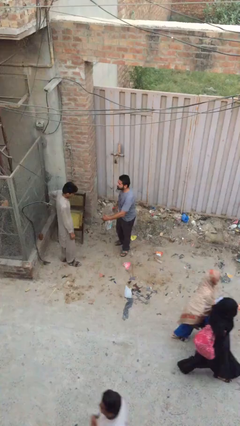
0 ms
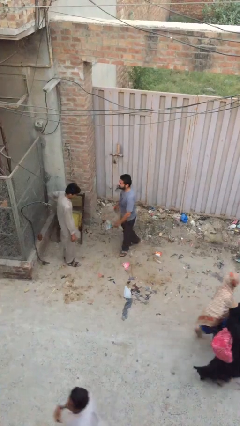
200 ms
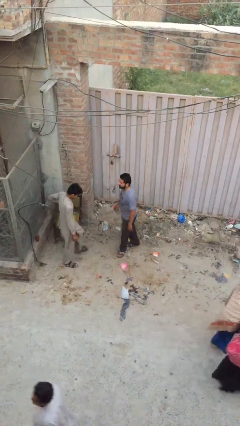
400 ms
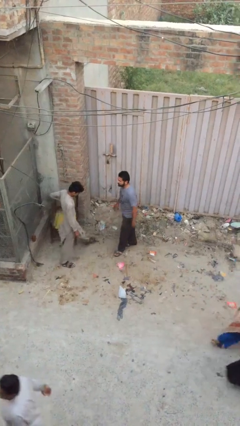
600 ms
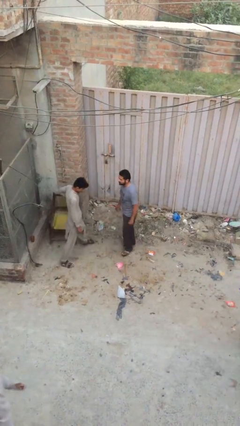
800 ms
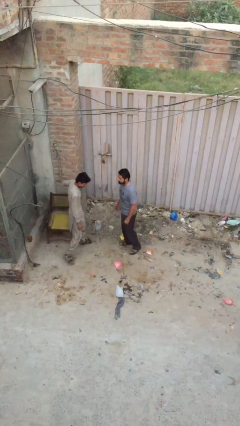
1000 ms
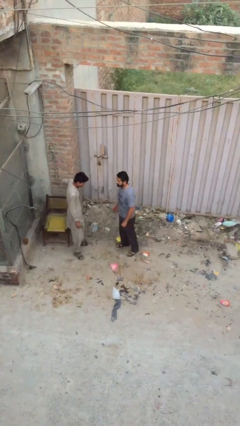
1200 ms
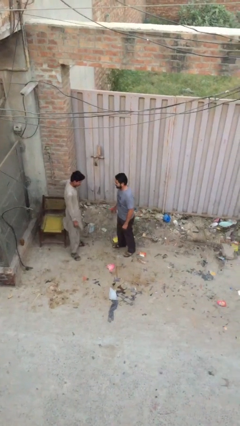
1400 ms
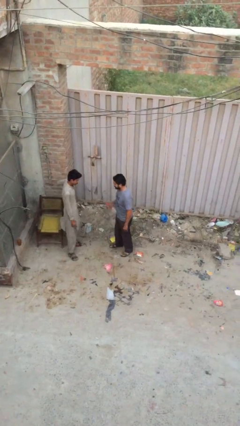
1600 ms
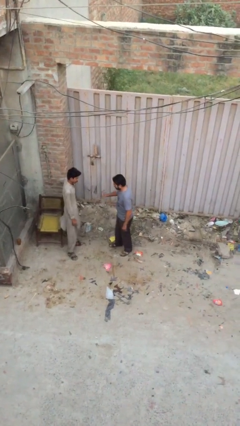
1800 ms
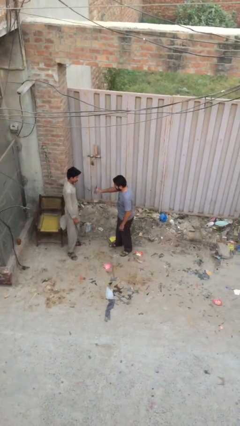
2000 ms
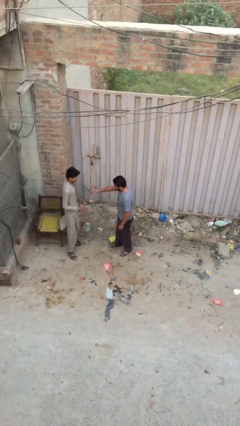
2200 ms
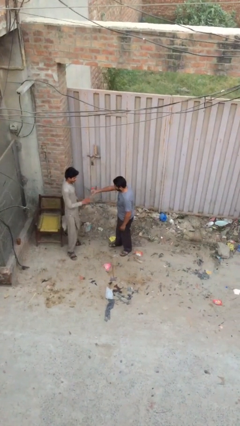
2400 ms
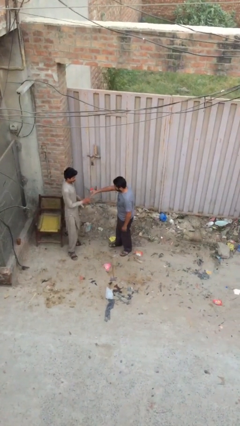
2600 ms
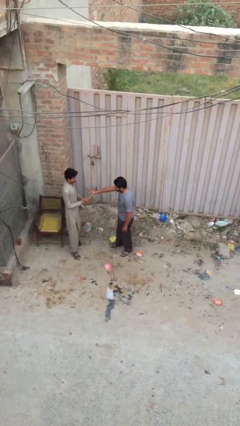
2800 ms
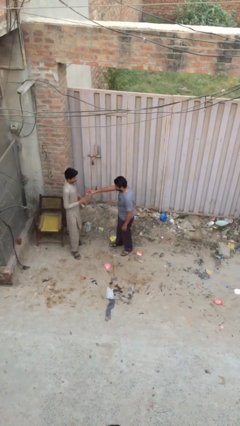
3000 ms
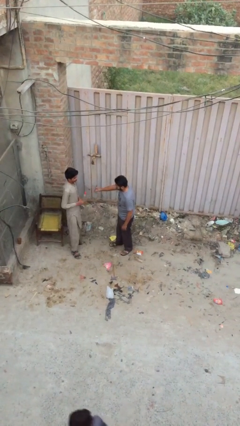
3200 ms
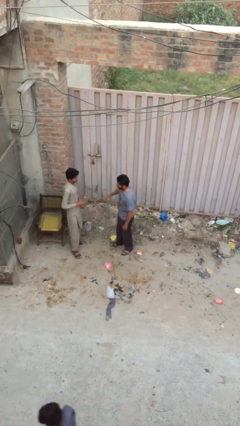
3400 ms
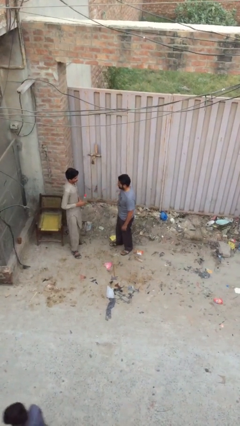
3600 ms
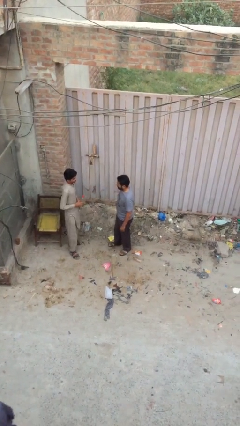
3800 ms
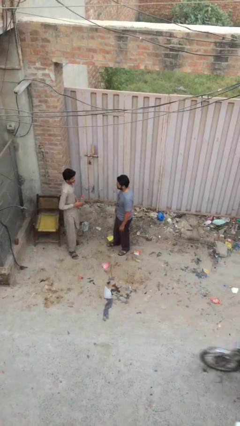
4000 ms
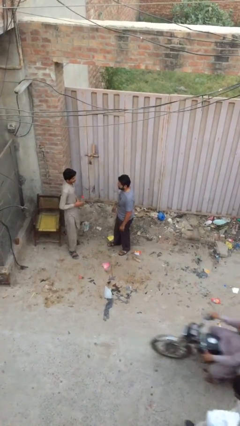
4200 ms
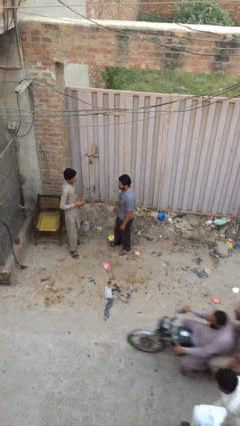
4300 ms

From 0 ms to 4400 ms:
person transfers object to person

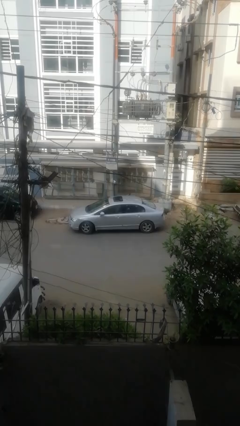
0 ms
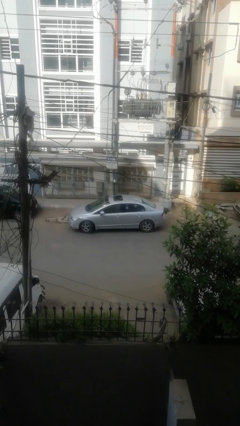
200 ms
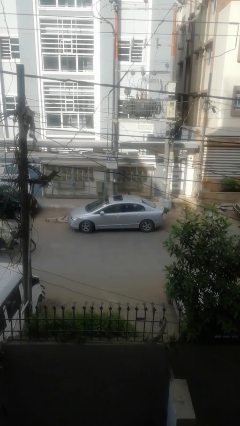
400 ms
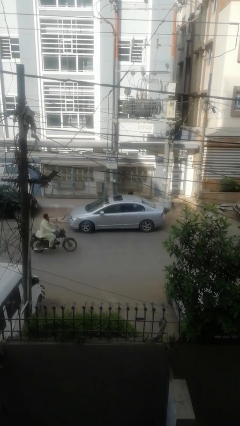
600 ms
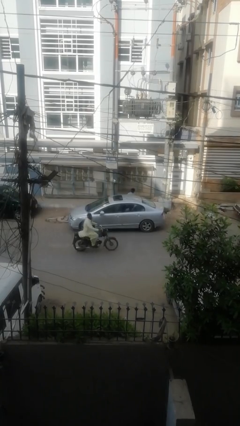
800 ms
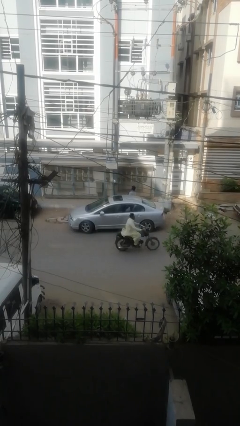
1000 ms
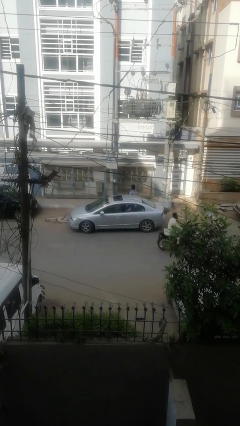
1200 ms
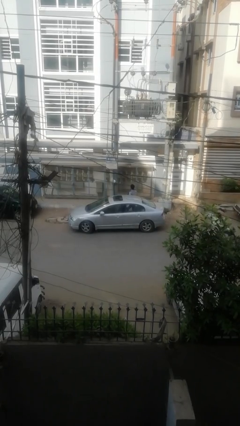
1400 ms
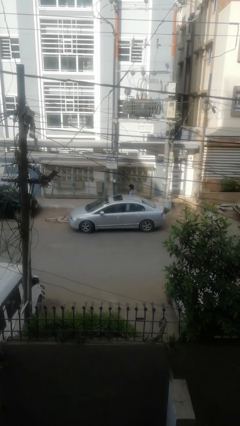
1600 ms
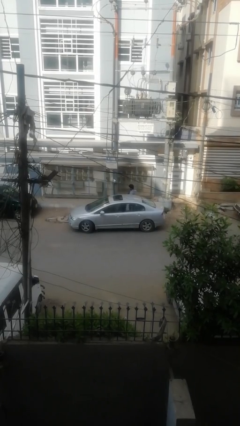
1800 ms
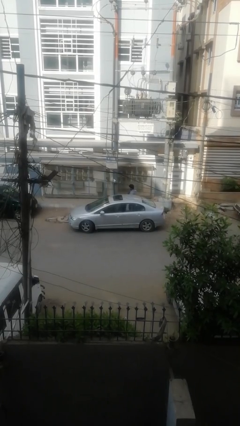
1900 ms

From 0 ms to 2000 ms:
car drops off person

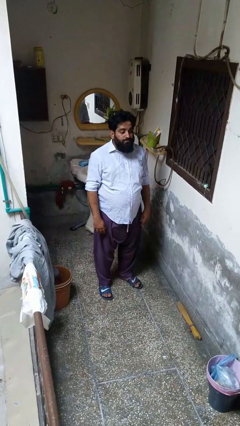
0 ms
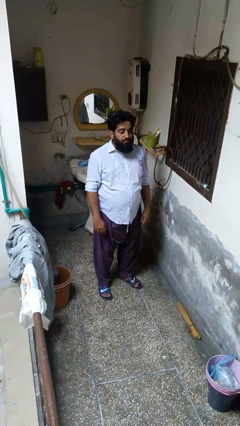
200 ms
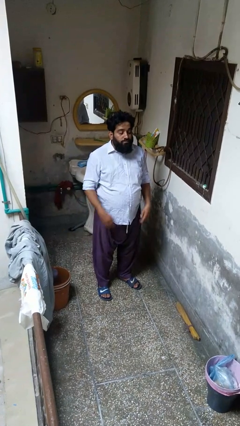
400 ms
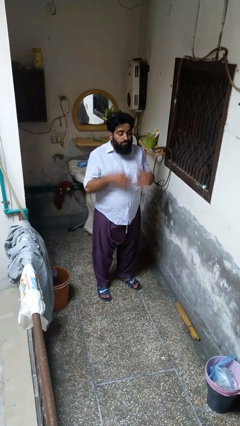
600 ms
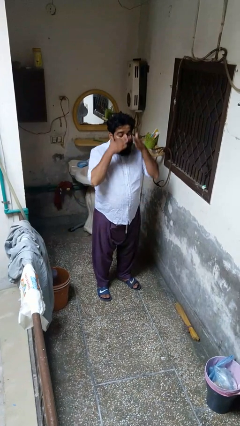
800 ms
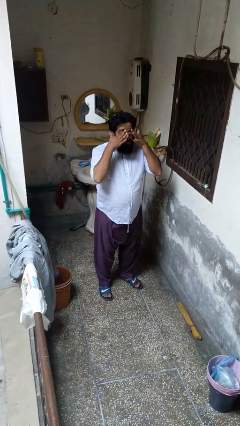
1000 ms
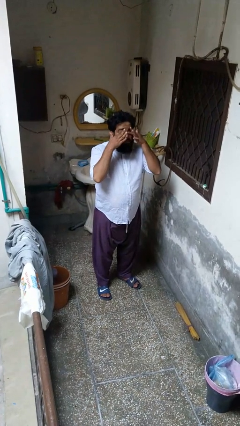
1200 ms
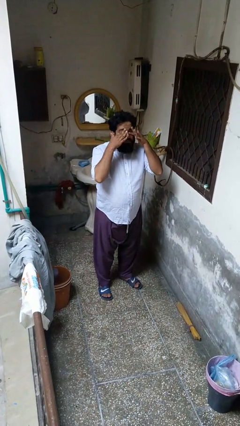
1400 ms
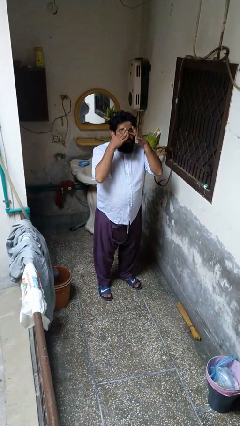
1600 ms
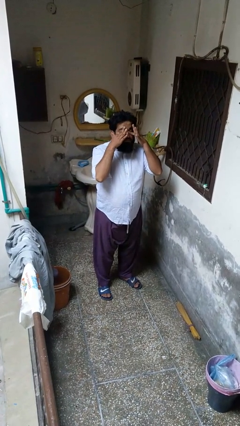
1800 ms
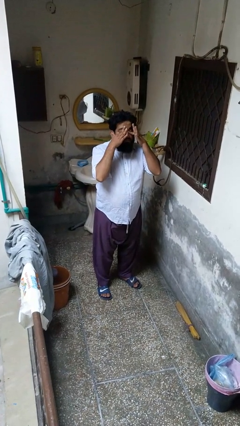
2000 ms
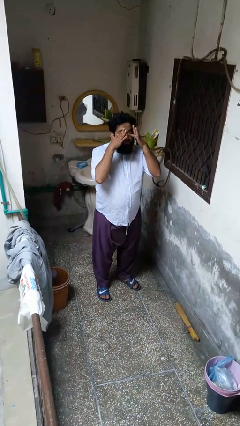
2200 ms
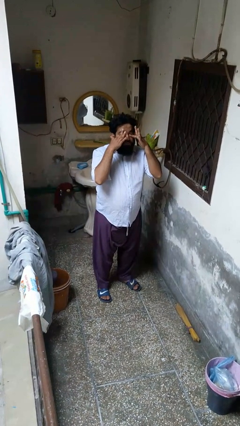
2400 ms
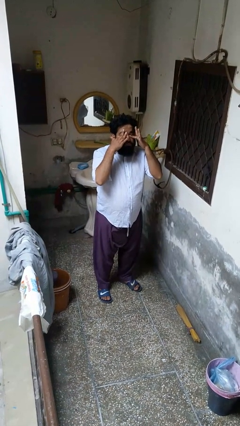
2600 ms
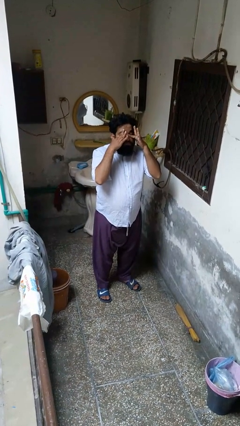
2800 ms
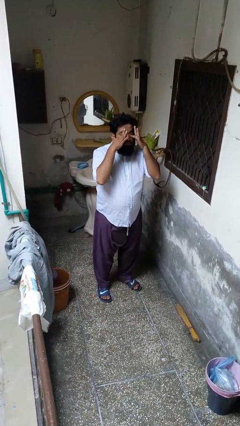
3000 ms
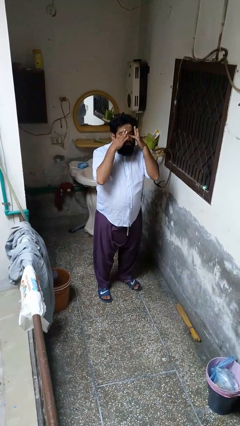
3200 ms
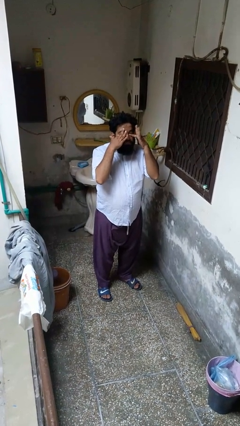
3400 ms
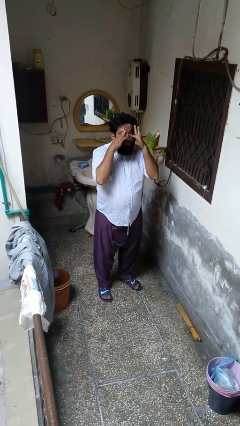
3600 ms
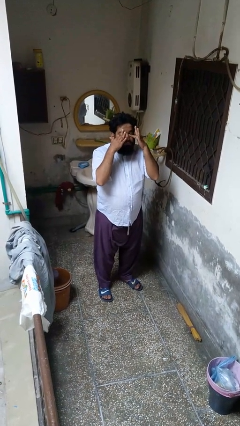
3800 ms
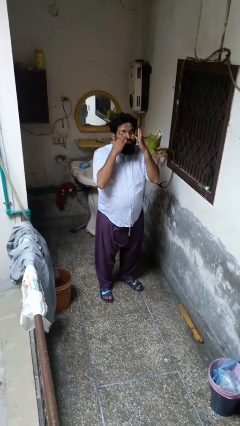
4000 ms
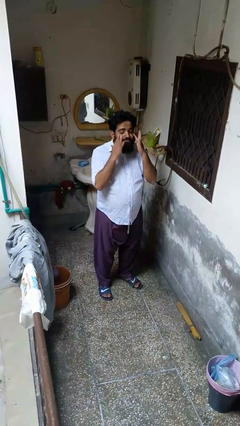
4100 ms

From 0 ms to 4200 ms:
person rubs eyes

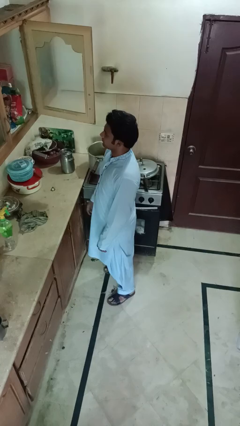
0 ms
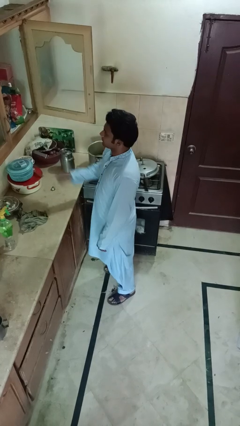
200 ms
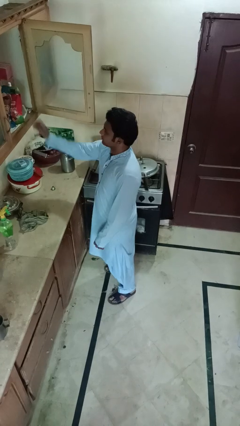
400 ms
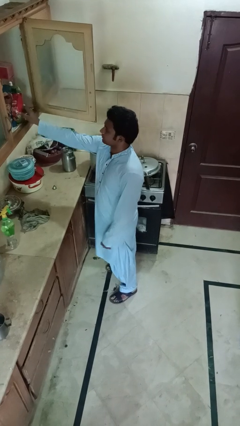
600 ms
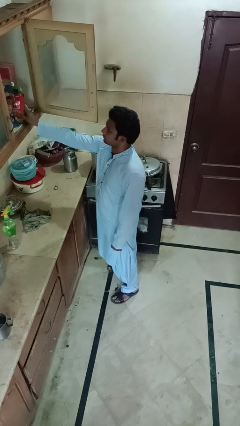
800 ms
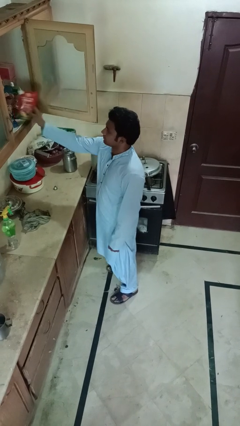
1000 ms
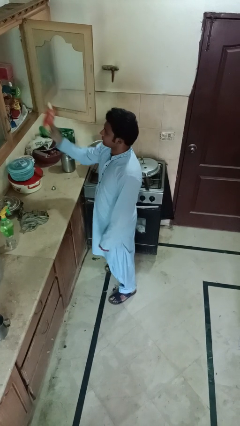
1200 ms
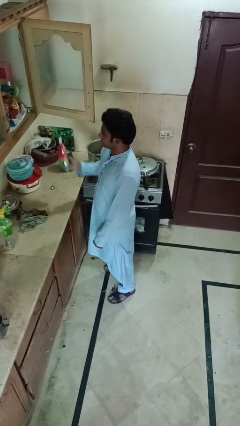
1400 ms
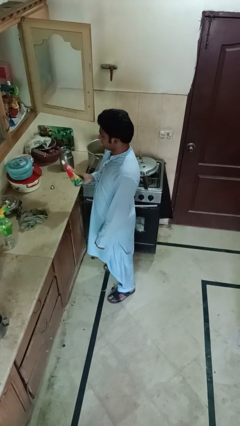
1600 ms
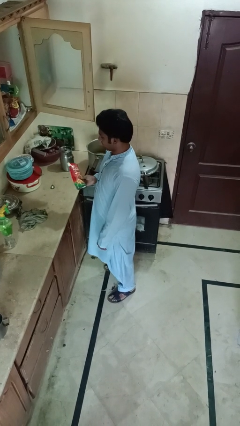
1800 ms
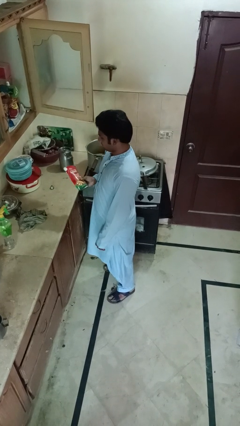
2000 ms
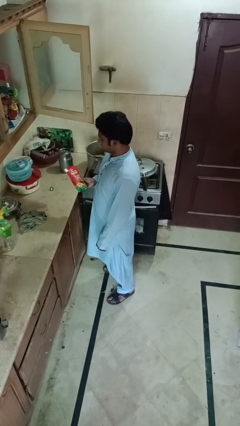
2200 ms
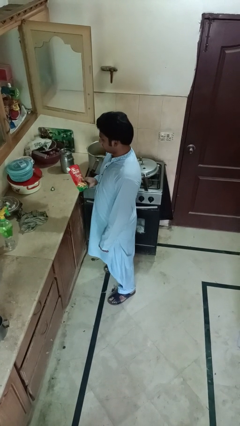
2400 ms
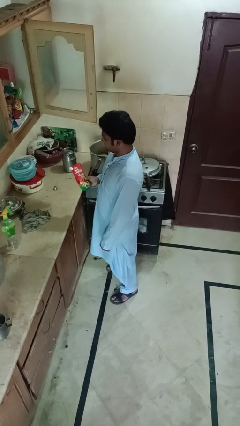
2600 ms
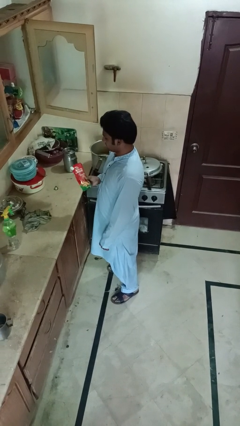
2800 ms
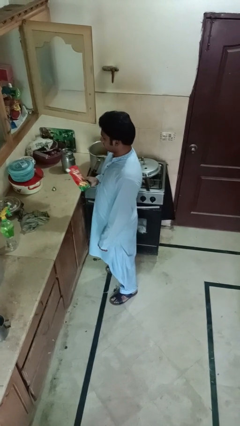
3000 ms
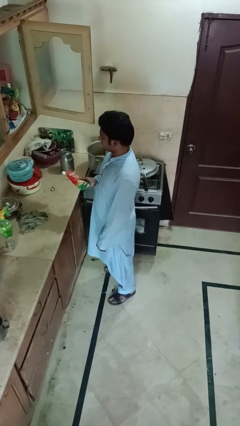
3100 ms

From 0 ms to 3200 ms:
person picks up object from cabinet

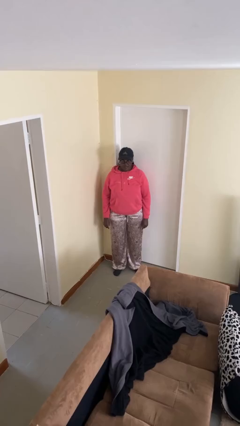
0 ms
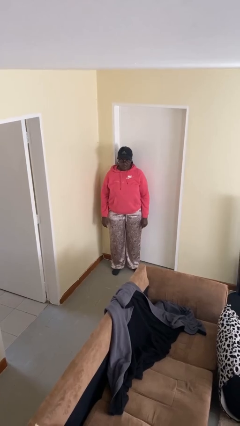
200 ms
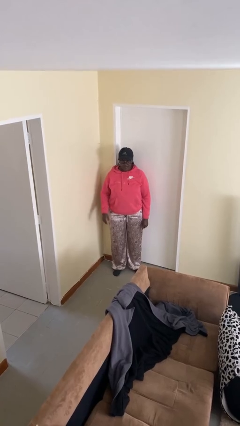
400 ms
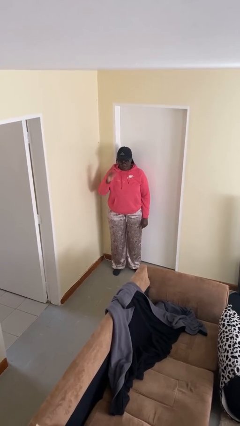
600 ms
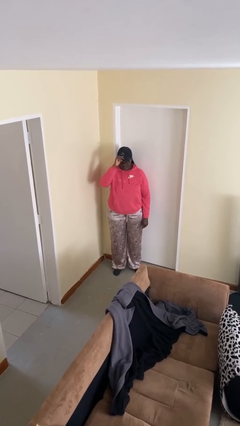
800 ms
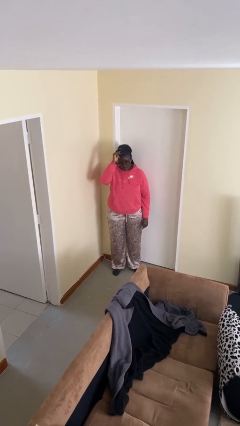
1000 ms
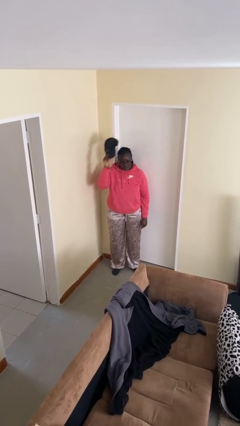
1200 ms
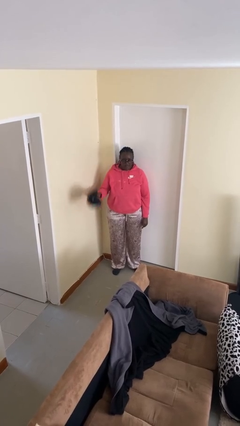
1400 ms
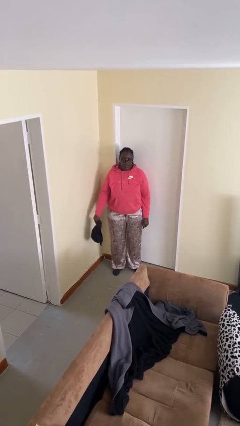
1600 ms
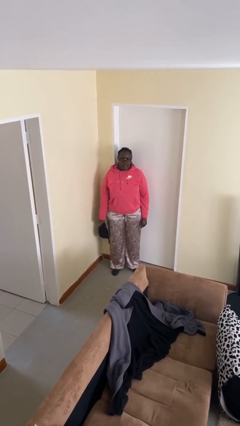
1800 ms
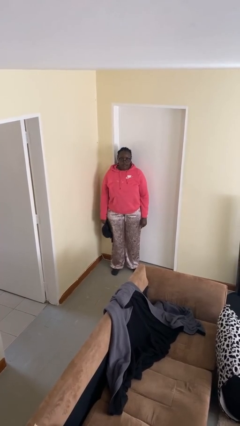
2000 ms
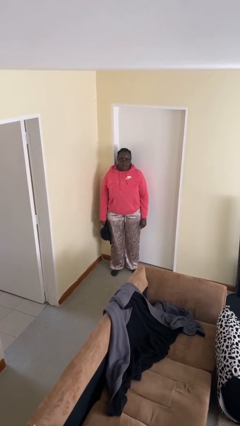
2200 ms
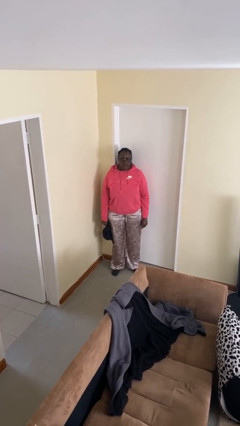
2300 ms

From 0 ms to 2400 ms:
person takes off hat

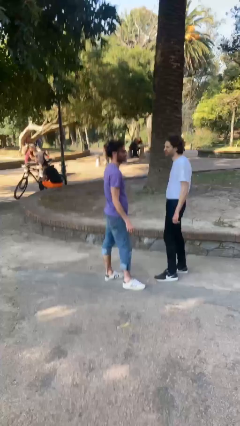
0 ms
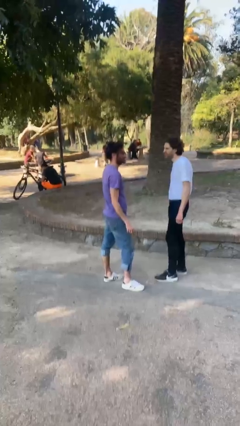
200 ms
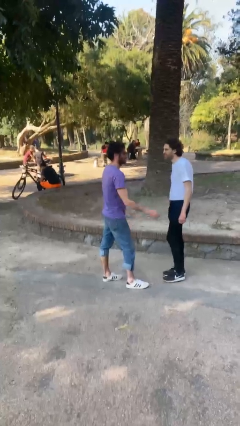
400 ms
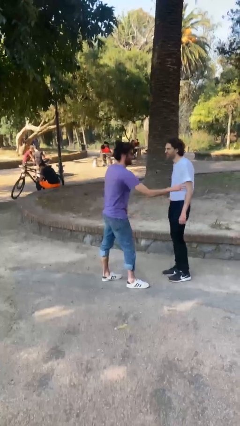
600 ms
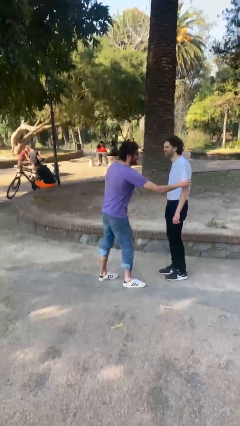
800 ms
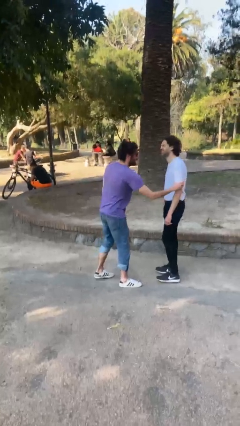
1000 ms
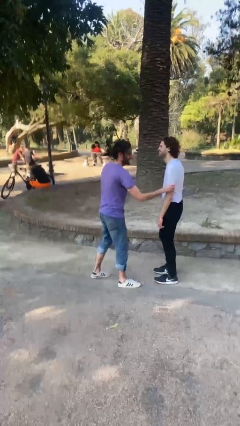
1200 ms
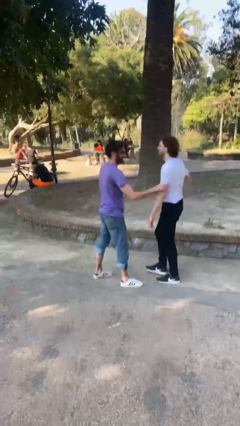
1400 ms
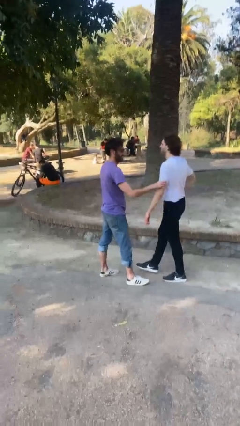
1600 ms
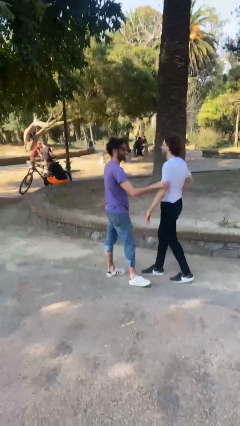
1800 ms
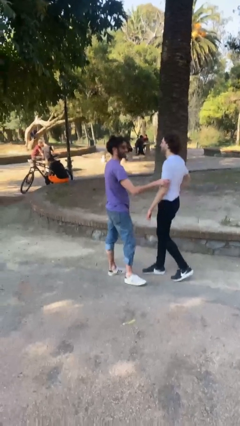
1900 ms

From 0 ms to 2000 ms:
person grabs person by bicep
